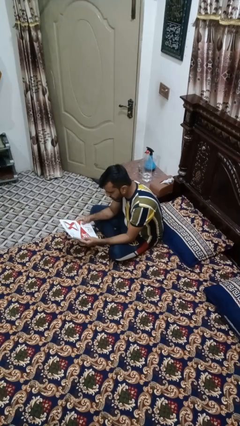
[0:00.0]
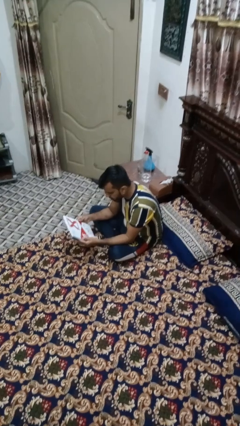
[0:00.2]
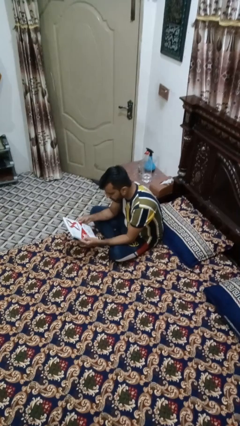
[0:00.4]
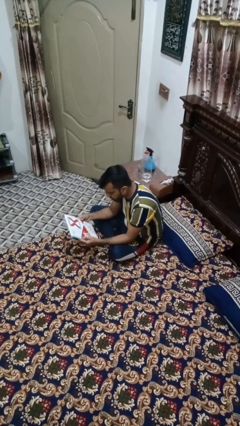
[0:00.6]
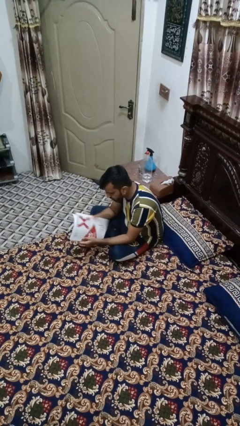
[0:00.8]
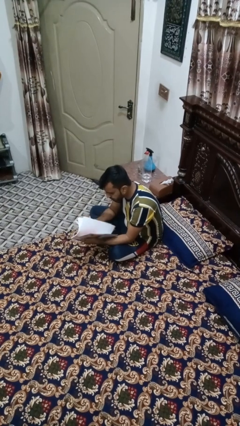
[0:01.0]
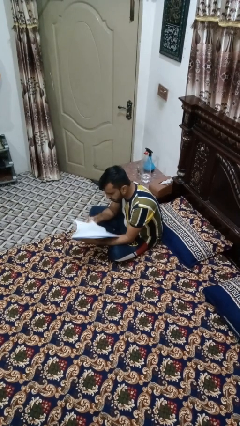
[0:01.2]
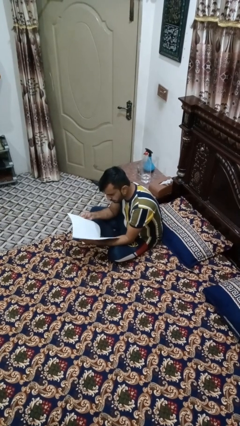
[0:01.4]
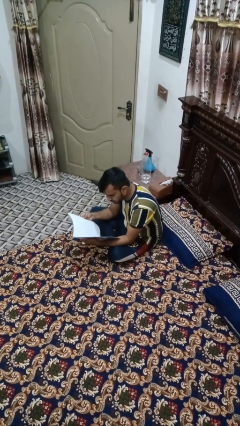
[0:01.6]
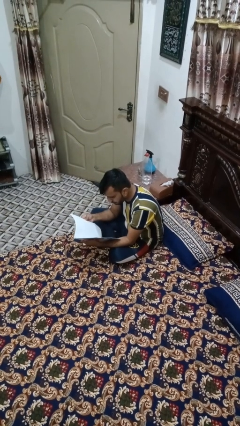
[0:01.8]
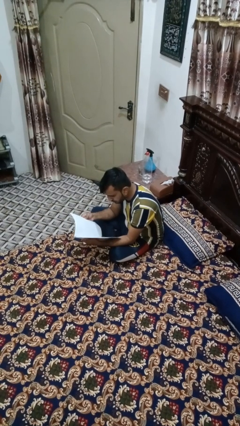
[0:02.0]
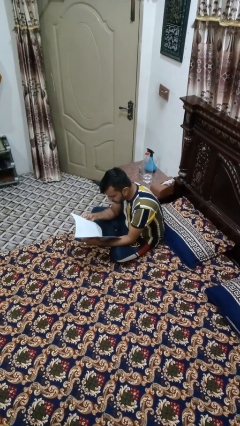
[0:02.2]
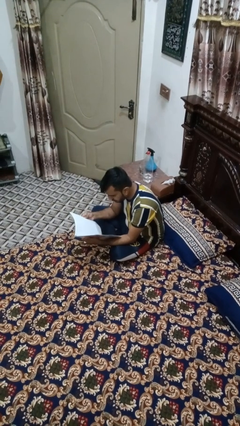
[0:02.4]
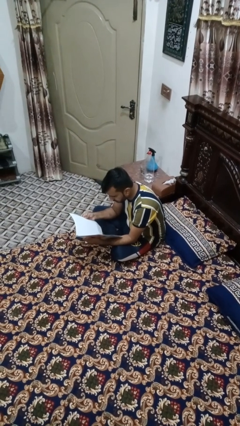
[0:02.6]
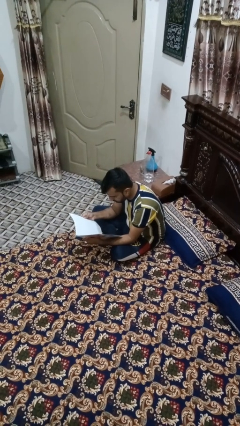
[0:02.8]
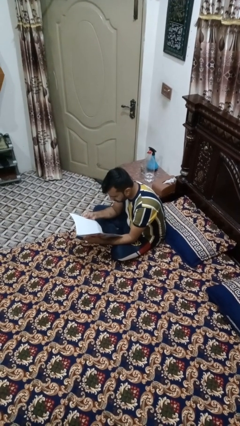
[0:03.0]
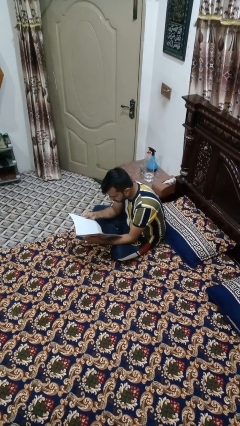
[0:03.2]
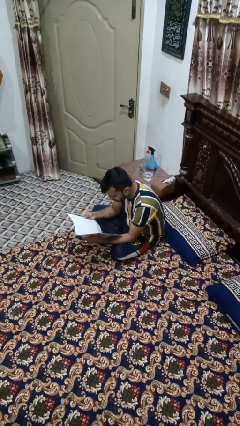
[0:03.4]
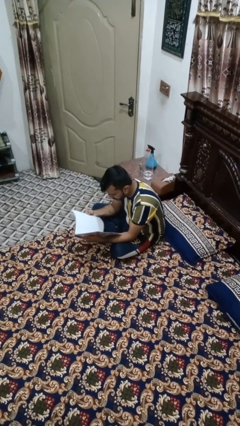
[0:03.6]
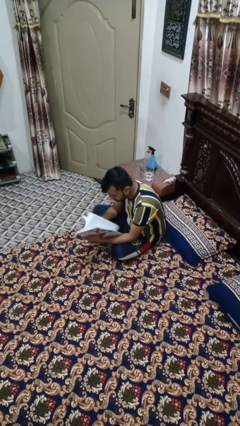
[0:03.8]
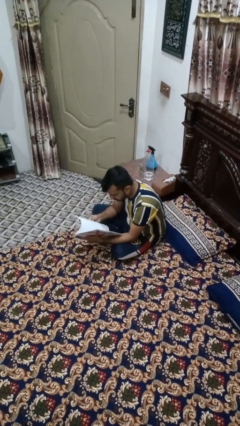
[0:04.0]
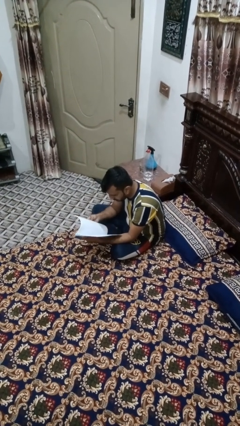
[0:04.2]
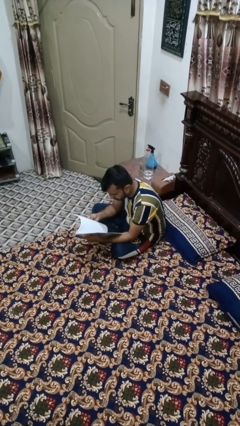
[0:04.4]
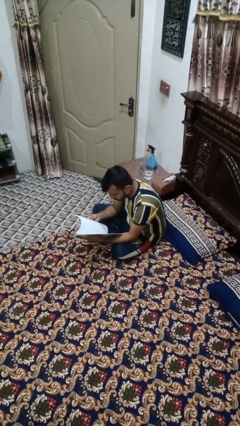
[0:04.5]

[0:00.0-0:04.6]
person reads magazine

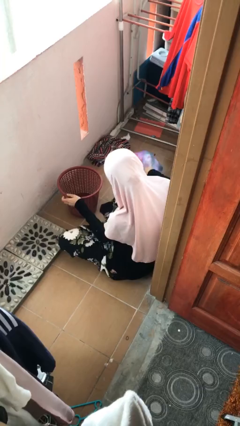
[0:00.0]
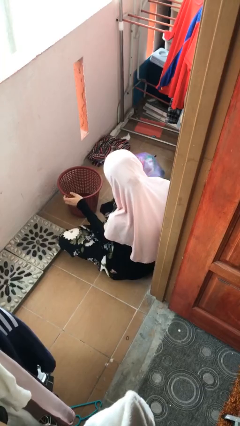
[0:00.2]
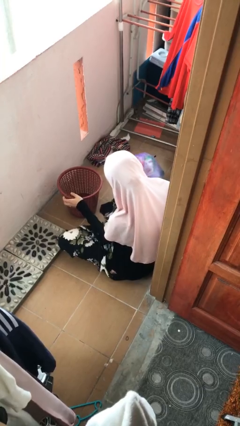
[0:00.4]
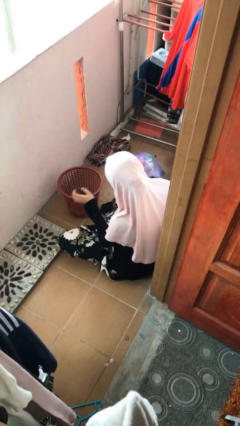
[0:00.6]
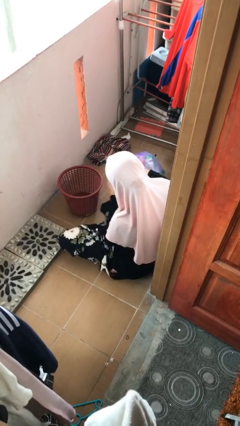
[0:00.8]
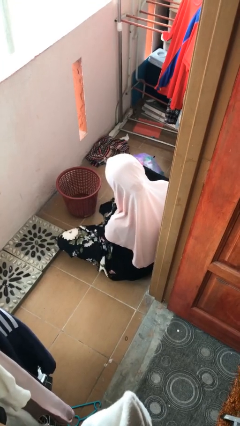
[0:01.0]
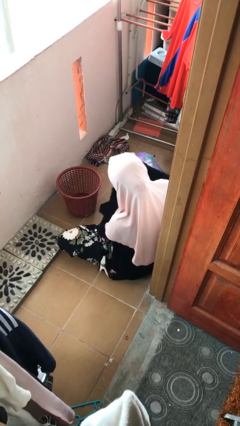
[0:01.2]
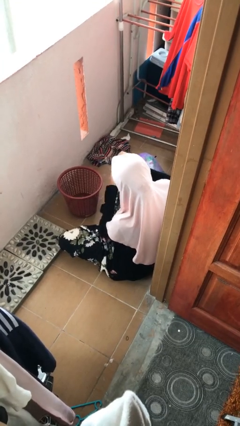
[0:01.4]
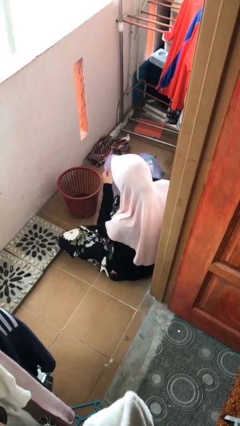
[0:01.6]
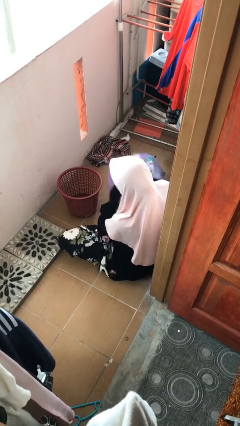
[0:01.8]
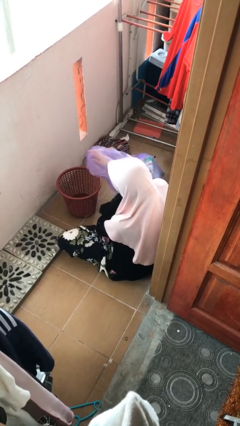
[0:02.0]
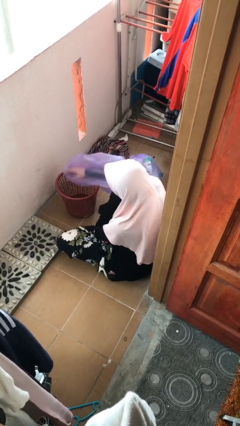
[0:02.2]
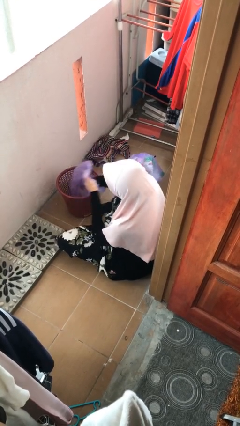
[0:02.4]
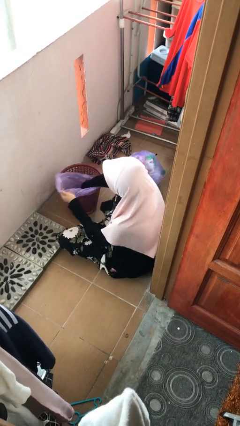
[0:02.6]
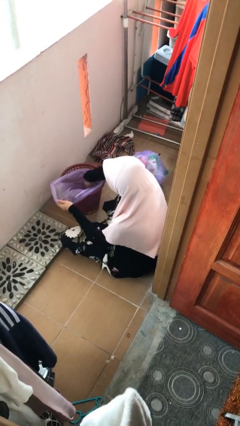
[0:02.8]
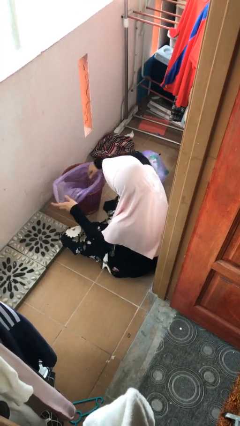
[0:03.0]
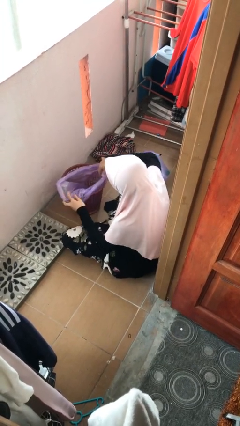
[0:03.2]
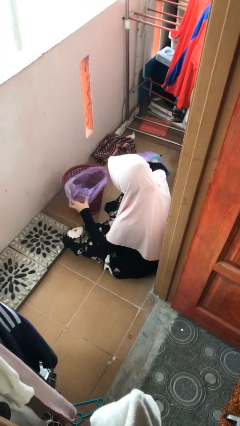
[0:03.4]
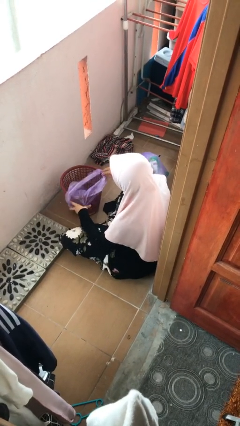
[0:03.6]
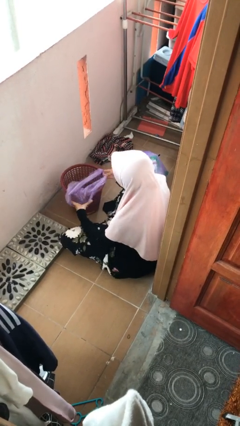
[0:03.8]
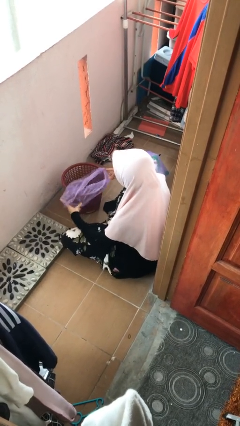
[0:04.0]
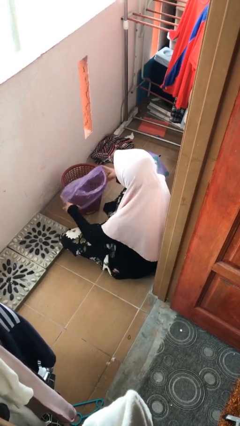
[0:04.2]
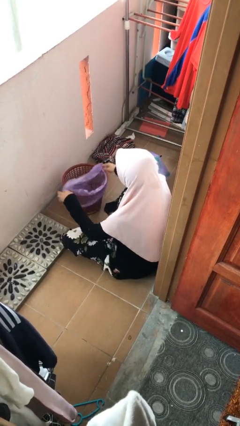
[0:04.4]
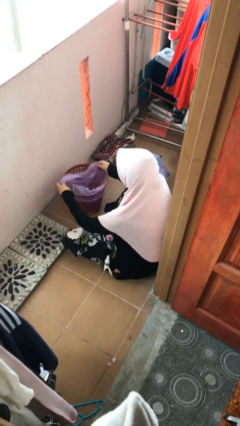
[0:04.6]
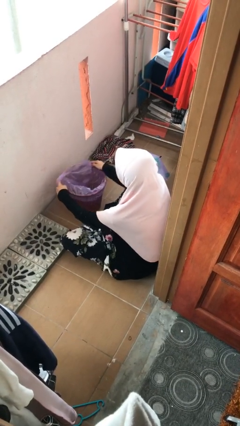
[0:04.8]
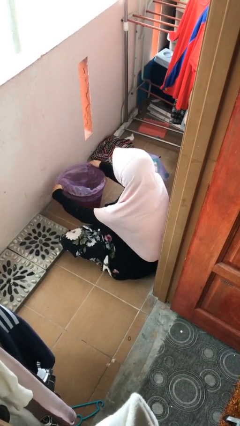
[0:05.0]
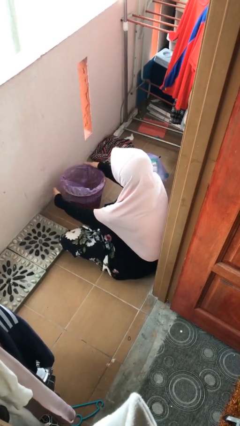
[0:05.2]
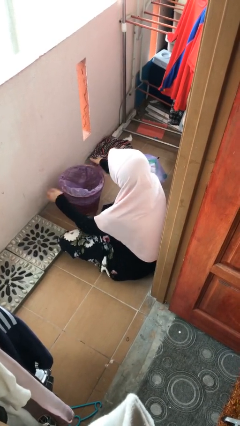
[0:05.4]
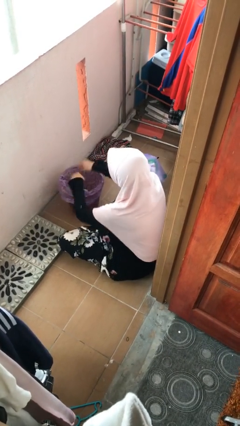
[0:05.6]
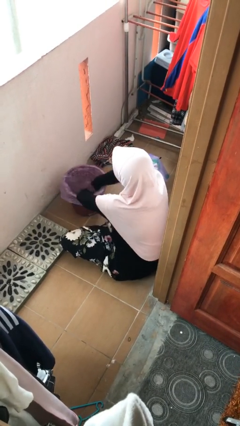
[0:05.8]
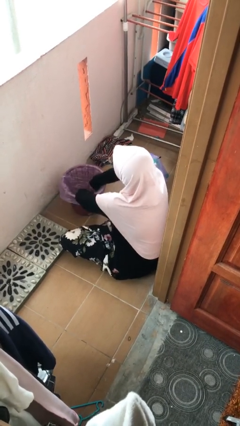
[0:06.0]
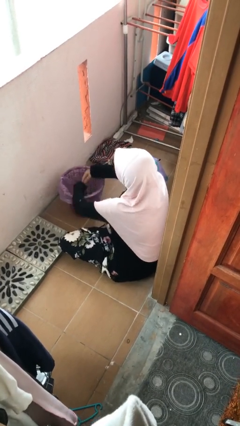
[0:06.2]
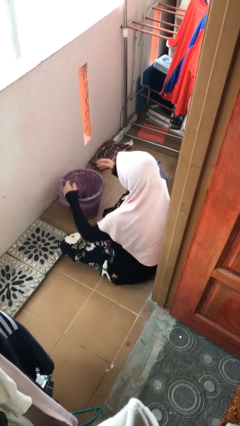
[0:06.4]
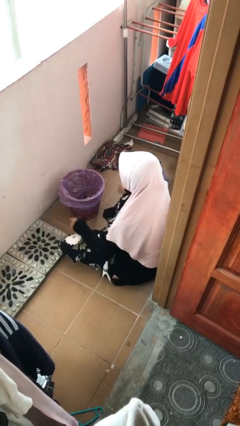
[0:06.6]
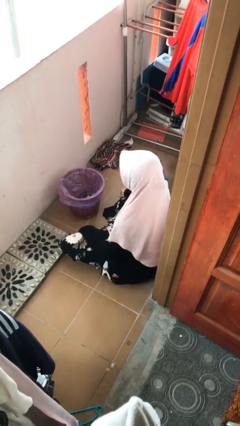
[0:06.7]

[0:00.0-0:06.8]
person inserts trashbag into trashcan

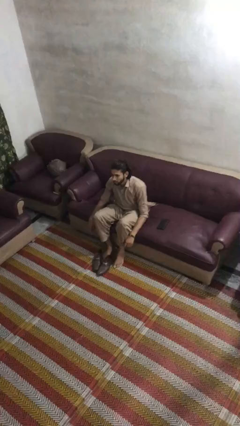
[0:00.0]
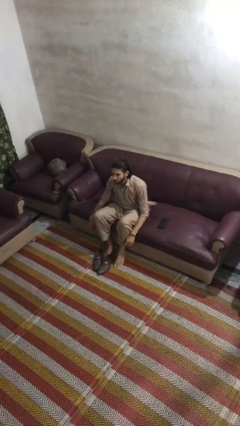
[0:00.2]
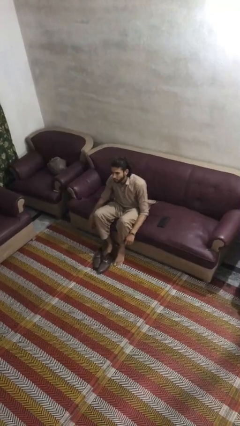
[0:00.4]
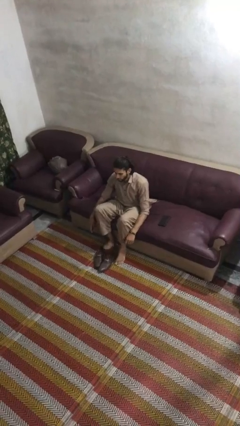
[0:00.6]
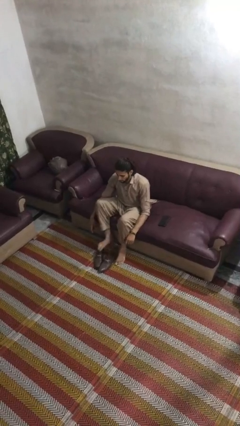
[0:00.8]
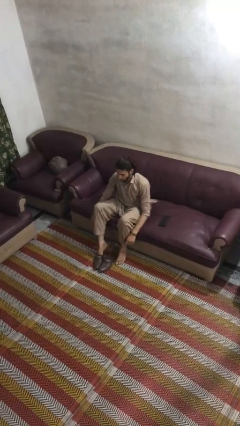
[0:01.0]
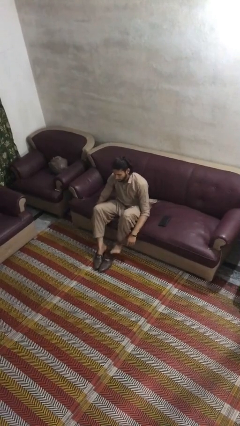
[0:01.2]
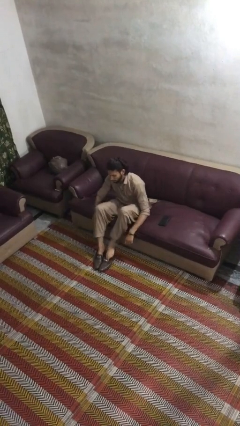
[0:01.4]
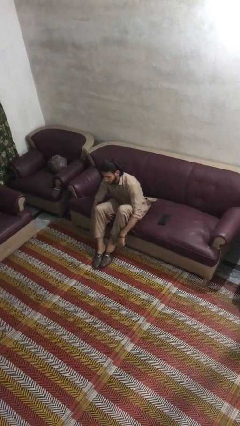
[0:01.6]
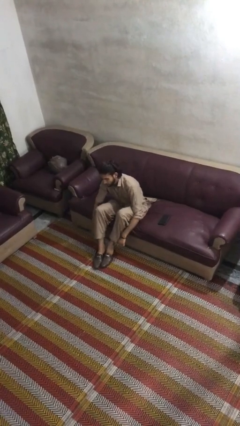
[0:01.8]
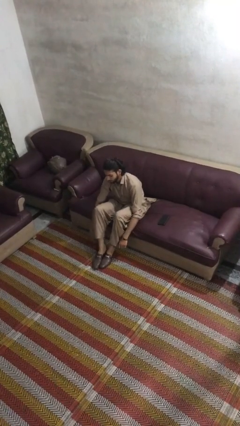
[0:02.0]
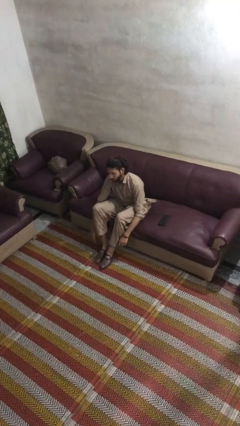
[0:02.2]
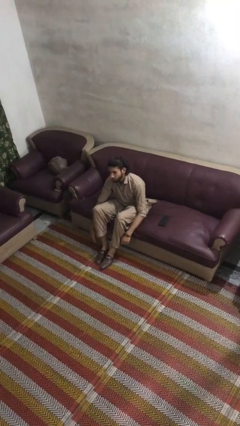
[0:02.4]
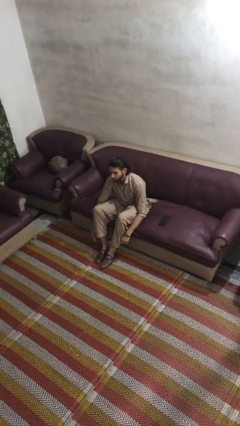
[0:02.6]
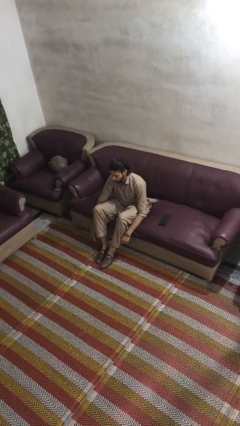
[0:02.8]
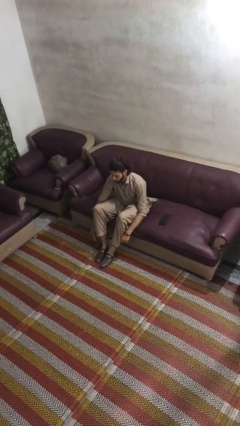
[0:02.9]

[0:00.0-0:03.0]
person puts on shoes

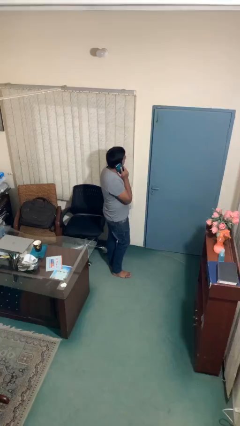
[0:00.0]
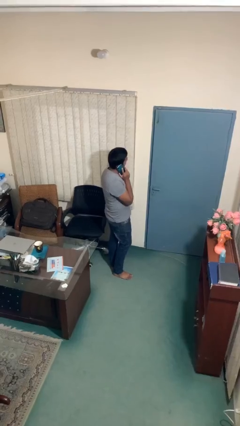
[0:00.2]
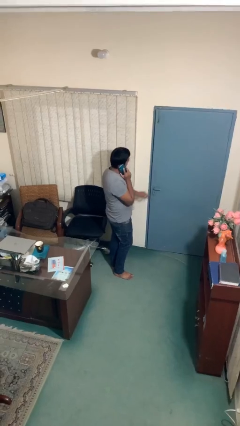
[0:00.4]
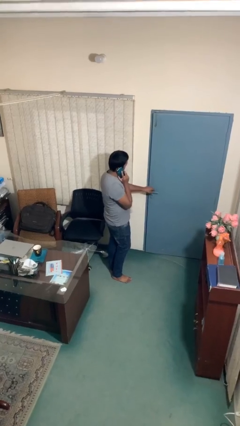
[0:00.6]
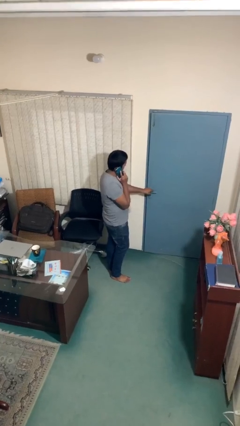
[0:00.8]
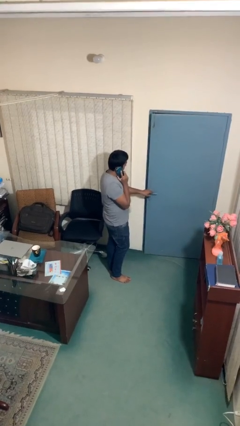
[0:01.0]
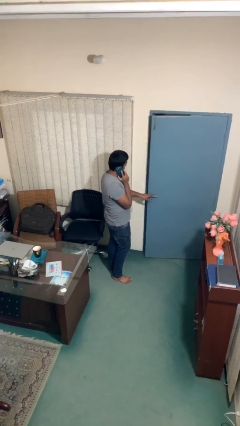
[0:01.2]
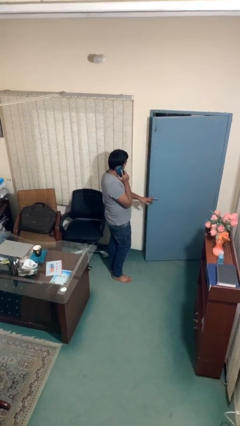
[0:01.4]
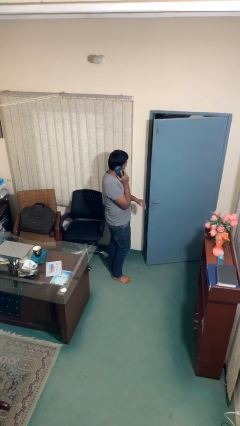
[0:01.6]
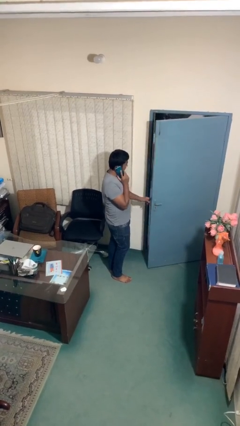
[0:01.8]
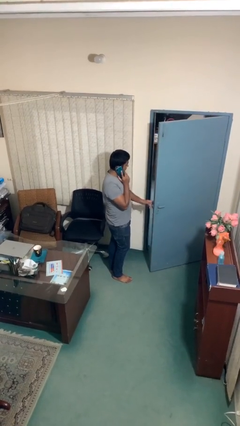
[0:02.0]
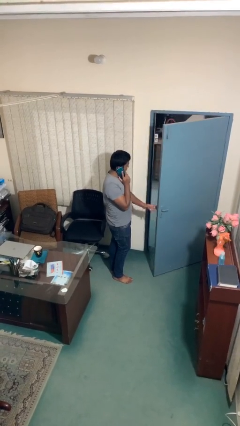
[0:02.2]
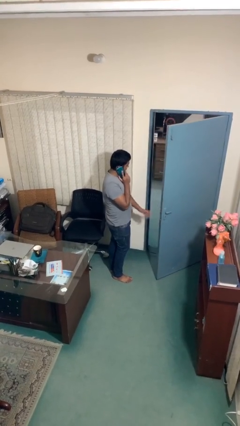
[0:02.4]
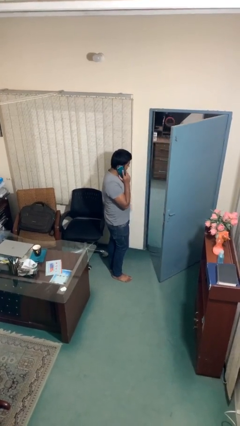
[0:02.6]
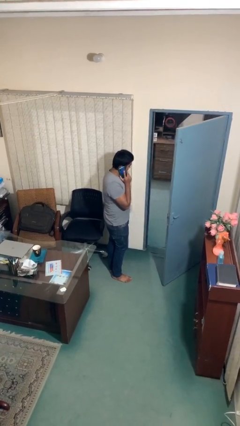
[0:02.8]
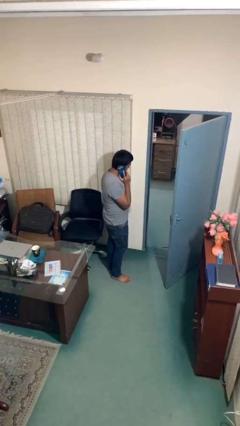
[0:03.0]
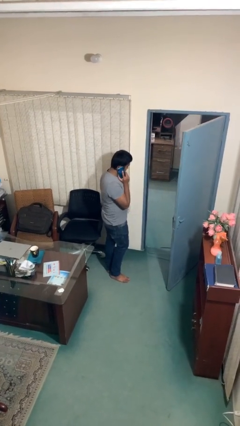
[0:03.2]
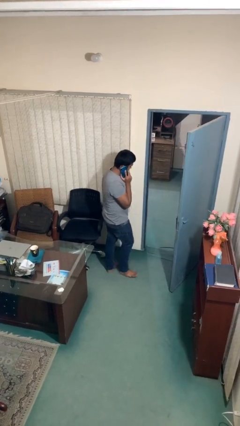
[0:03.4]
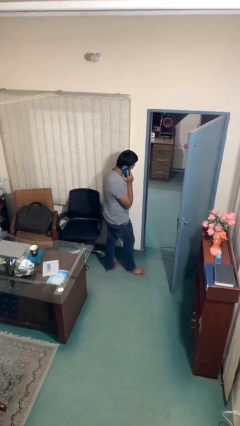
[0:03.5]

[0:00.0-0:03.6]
person opens facility door

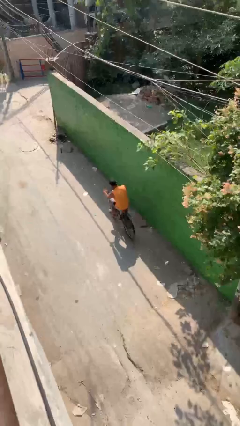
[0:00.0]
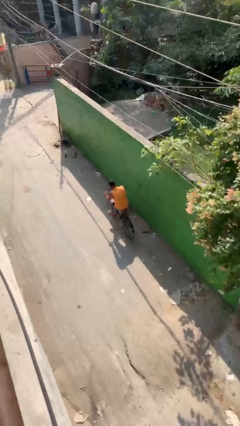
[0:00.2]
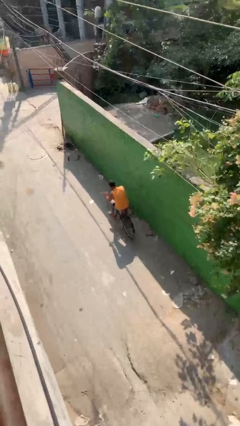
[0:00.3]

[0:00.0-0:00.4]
person rides bicycle
